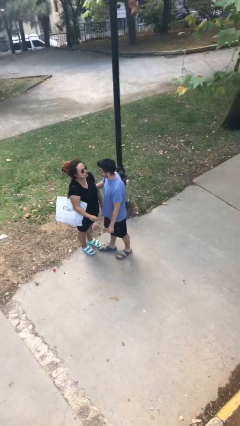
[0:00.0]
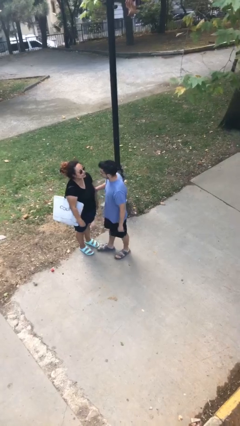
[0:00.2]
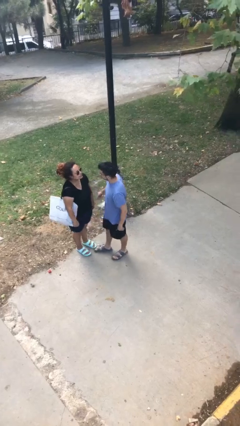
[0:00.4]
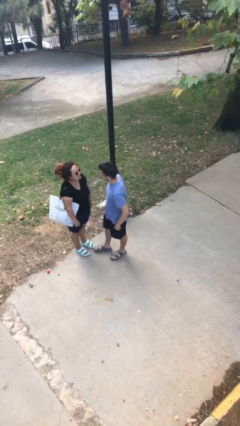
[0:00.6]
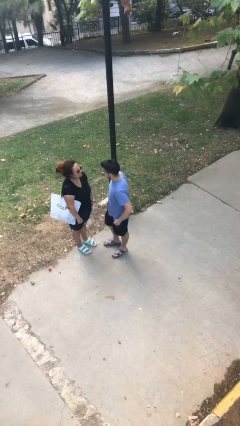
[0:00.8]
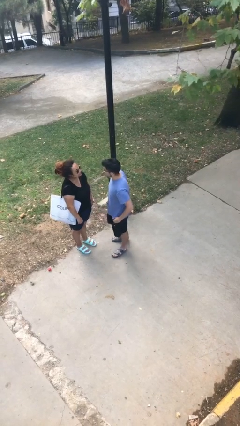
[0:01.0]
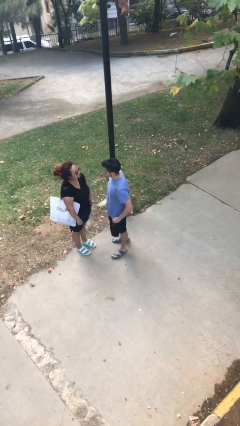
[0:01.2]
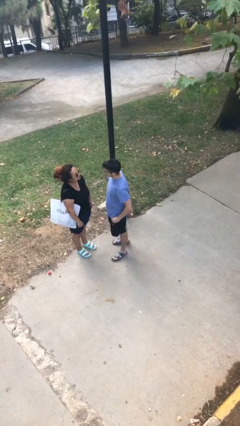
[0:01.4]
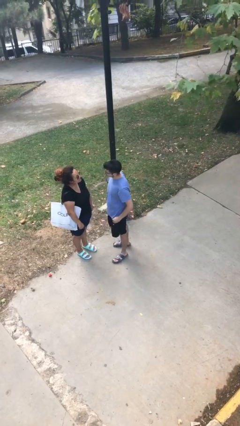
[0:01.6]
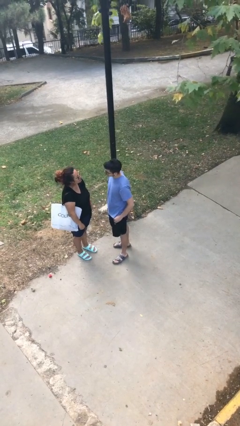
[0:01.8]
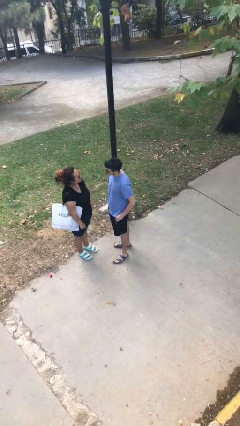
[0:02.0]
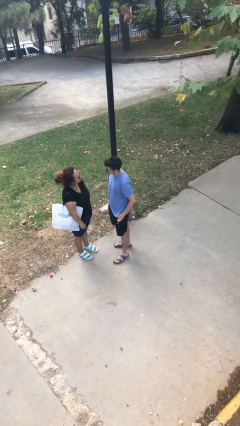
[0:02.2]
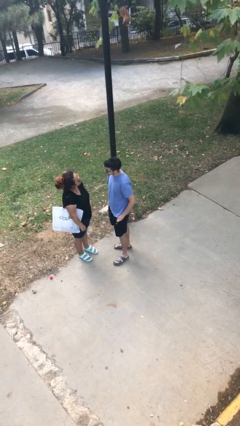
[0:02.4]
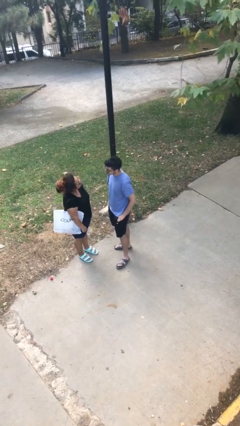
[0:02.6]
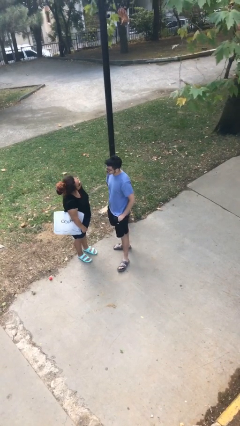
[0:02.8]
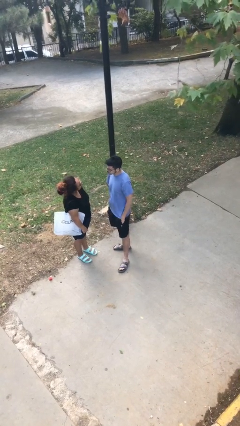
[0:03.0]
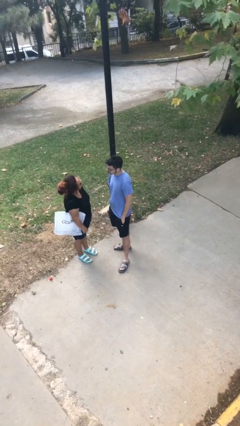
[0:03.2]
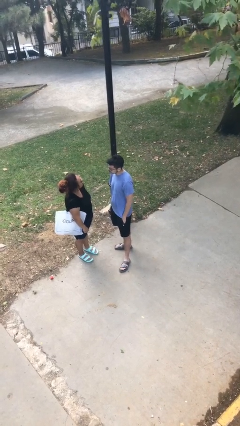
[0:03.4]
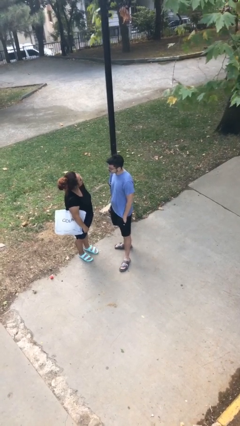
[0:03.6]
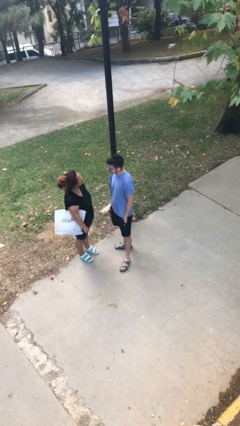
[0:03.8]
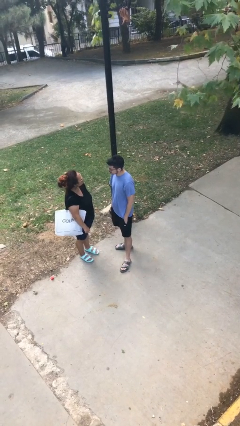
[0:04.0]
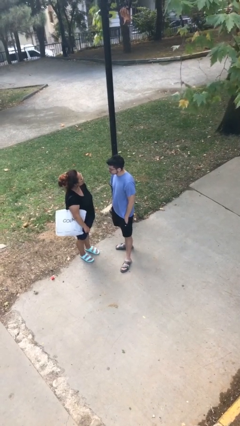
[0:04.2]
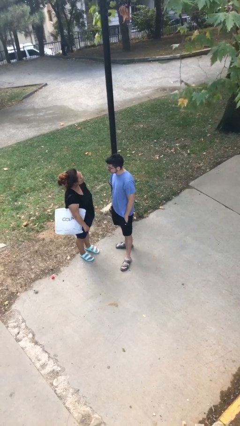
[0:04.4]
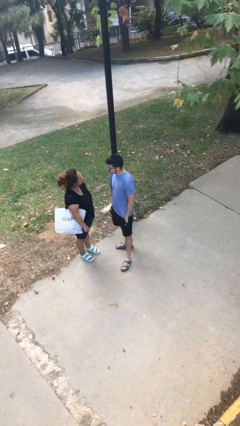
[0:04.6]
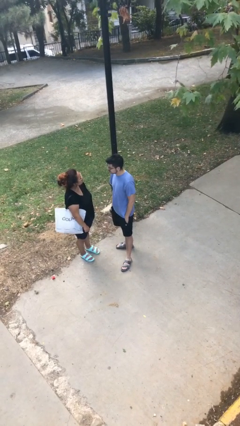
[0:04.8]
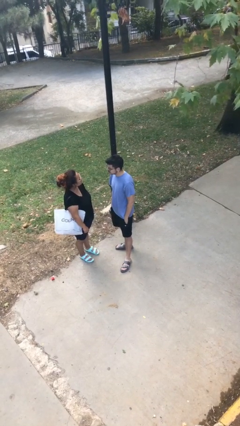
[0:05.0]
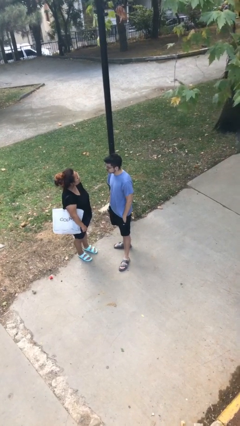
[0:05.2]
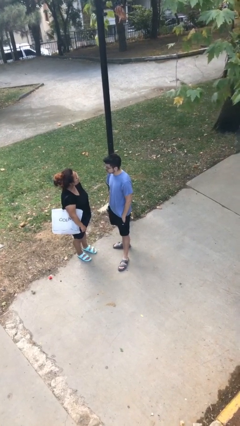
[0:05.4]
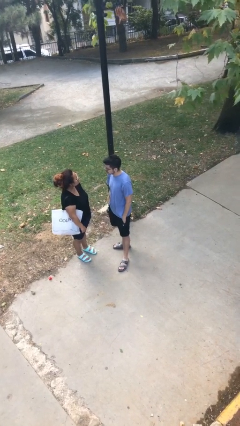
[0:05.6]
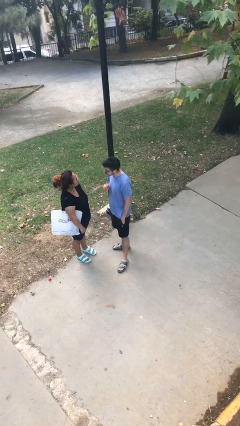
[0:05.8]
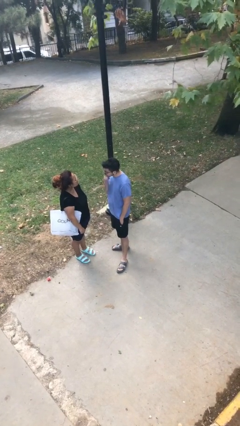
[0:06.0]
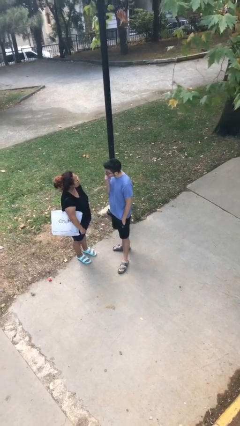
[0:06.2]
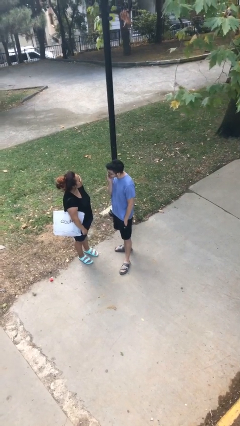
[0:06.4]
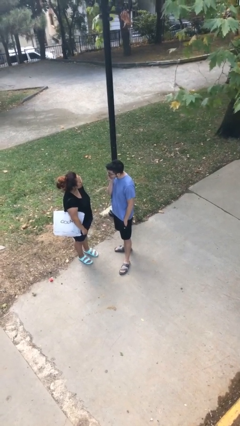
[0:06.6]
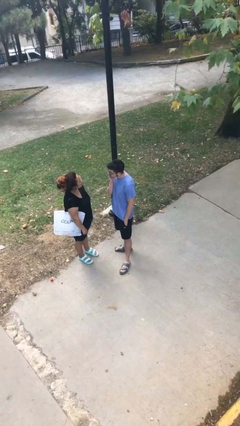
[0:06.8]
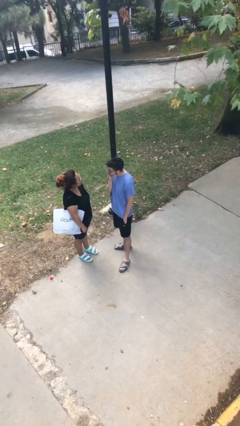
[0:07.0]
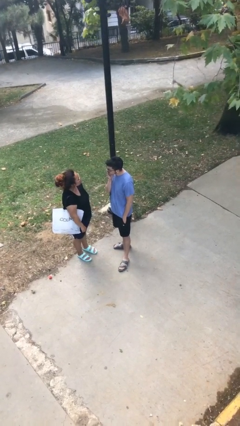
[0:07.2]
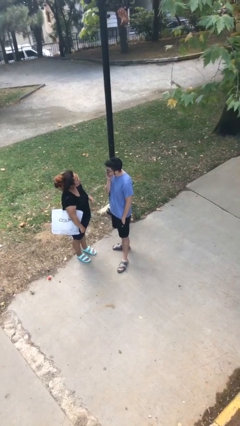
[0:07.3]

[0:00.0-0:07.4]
person talks to person

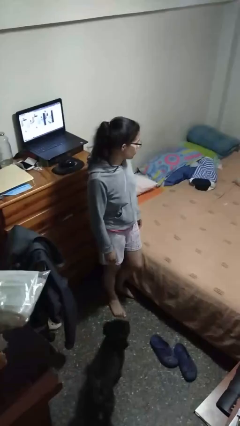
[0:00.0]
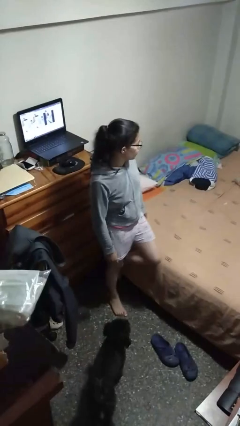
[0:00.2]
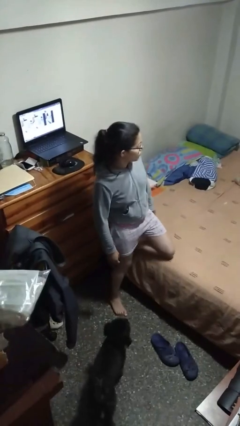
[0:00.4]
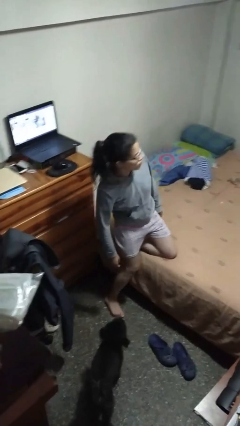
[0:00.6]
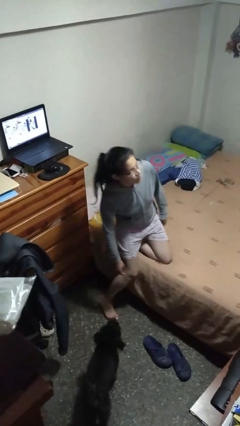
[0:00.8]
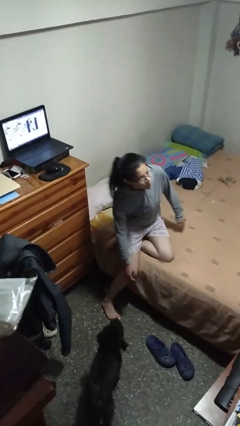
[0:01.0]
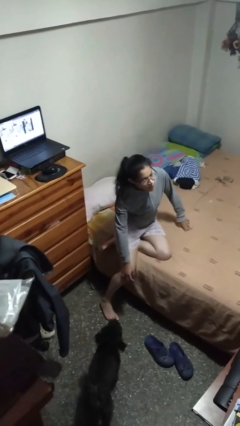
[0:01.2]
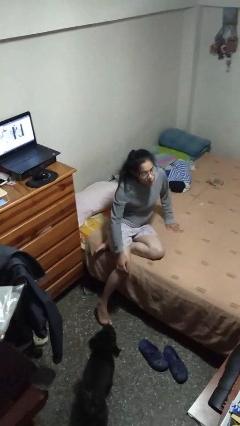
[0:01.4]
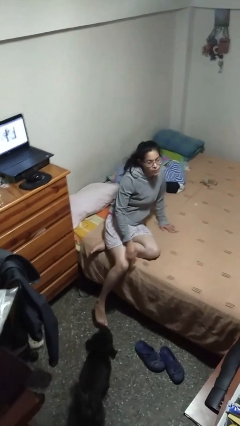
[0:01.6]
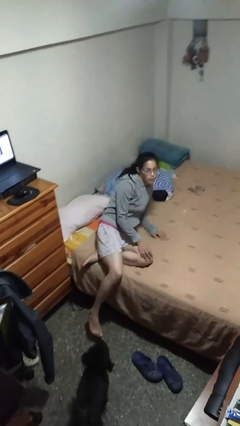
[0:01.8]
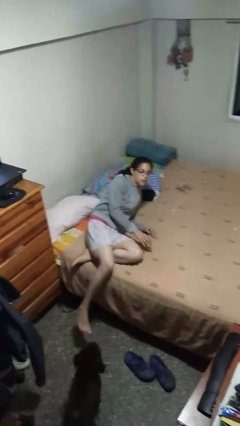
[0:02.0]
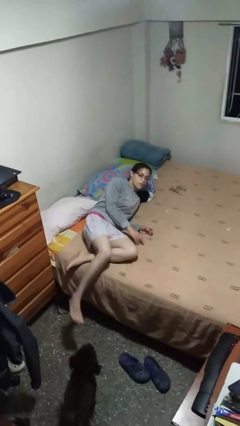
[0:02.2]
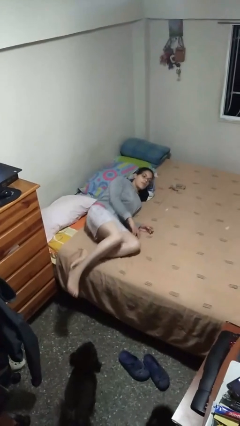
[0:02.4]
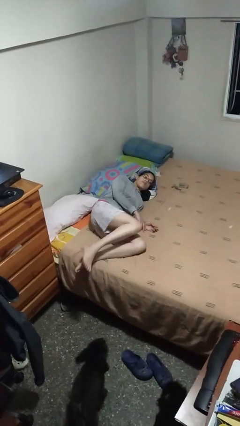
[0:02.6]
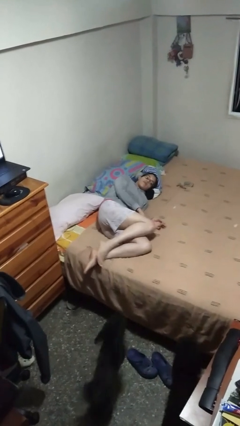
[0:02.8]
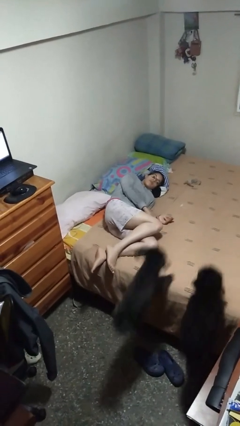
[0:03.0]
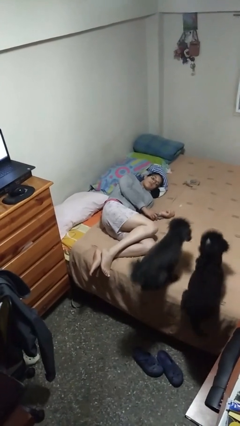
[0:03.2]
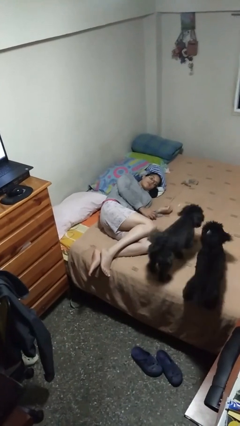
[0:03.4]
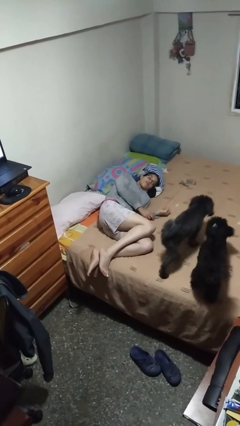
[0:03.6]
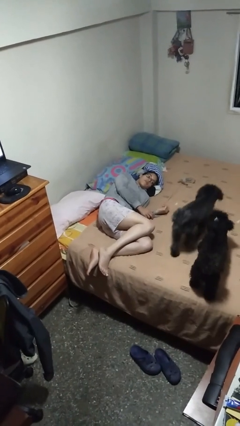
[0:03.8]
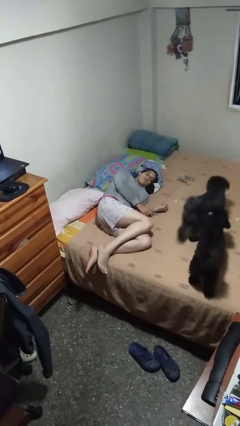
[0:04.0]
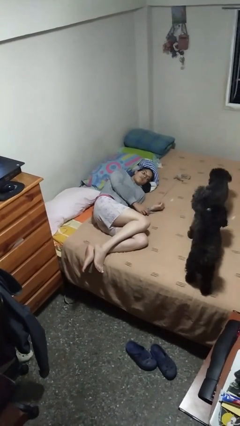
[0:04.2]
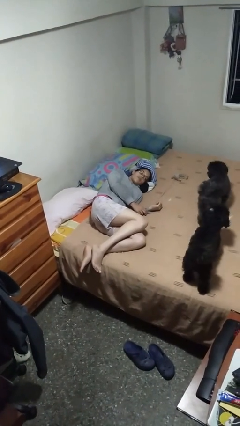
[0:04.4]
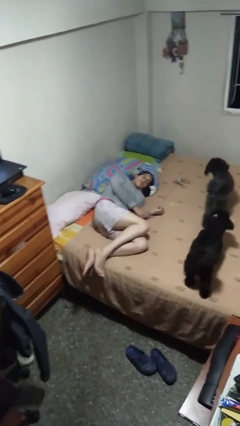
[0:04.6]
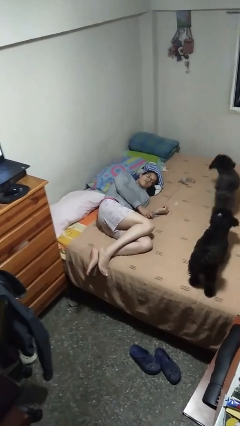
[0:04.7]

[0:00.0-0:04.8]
person lies down on bed

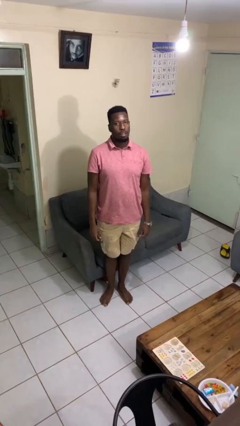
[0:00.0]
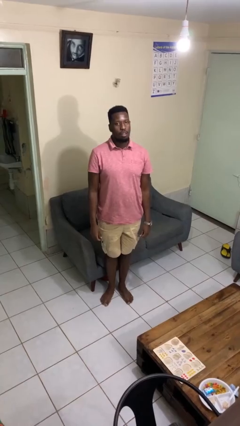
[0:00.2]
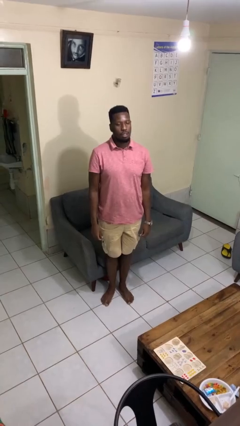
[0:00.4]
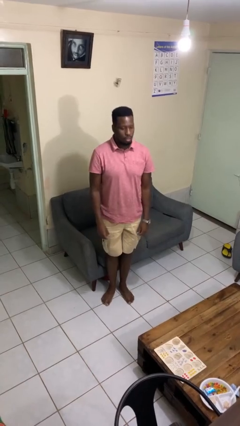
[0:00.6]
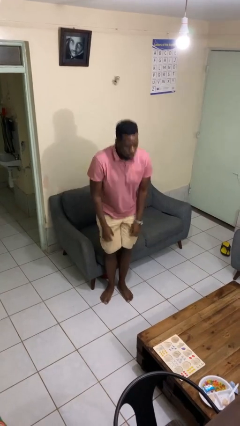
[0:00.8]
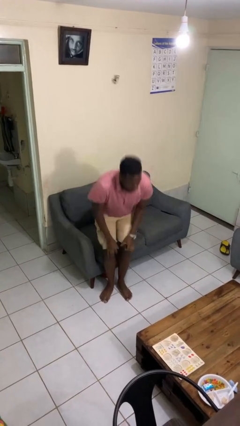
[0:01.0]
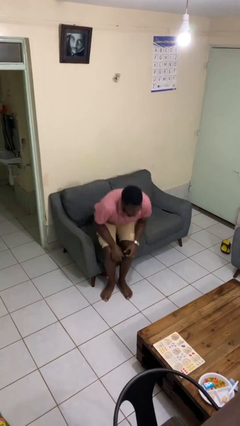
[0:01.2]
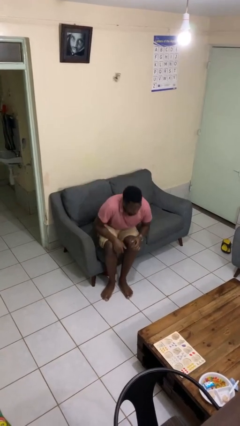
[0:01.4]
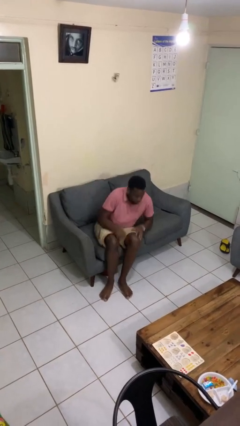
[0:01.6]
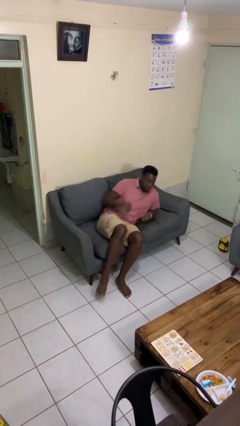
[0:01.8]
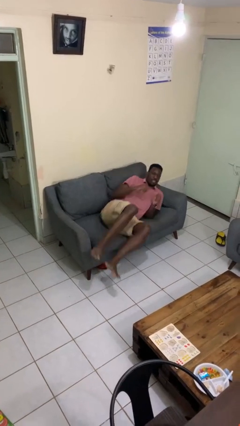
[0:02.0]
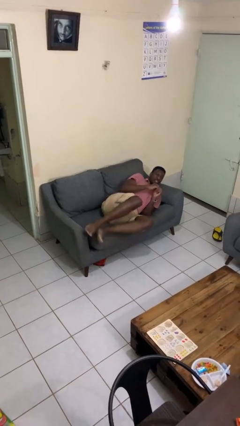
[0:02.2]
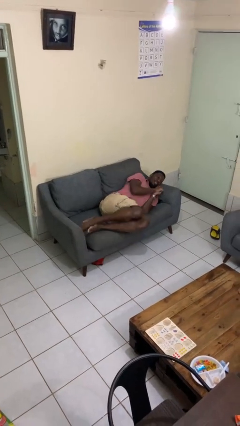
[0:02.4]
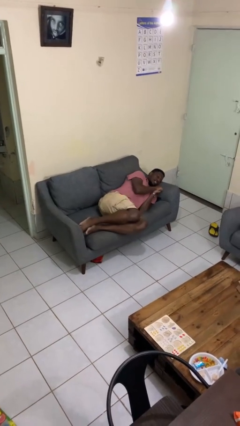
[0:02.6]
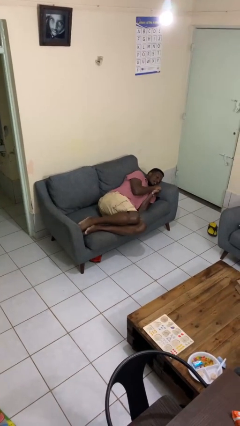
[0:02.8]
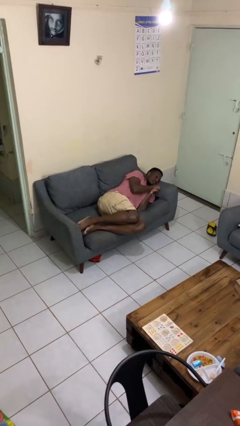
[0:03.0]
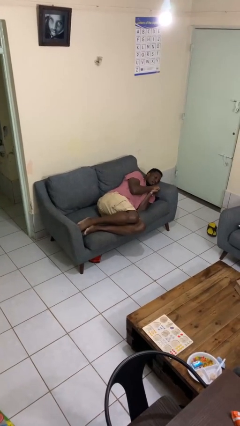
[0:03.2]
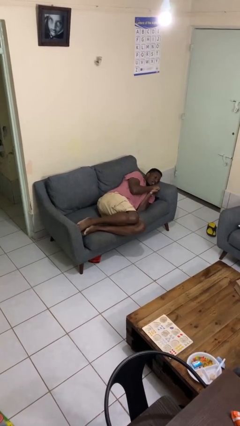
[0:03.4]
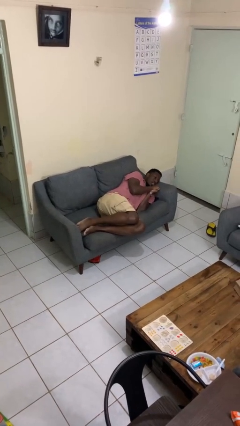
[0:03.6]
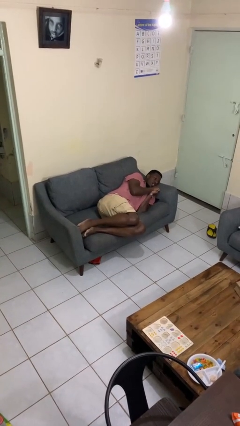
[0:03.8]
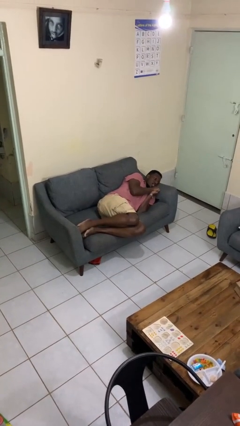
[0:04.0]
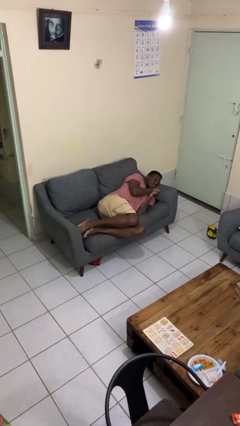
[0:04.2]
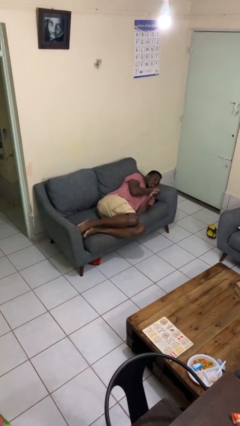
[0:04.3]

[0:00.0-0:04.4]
person lies down on couch

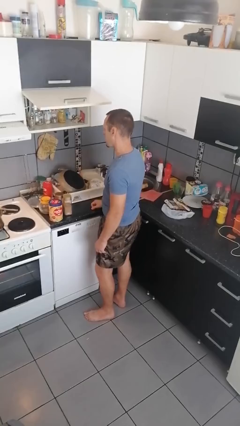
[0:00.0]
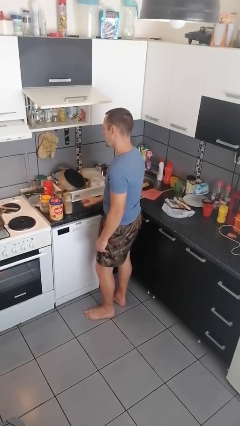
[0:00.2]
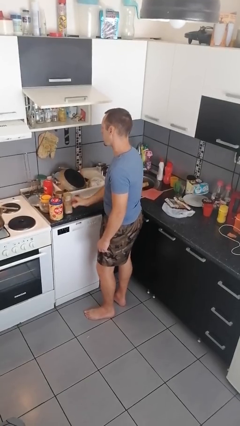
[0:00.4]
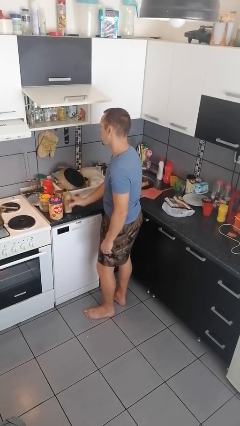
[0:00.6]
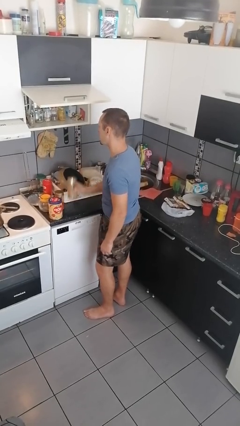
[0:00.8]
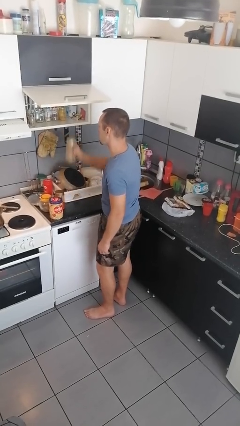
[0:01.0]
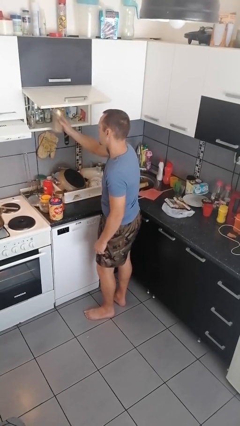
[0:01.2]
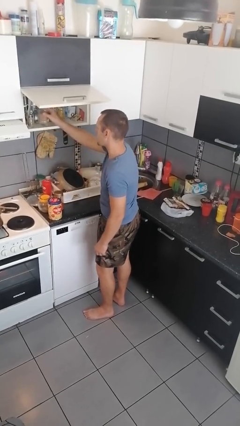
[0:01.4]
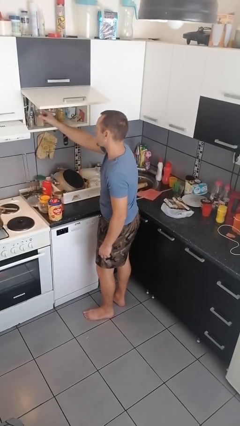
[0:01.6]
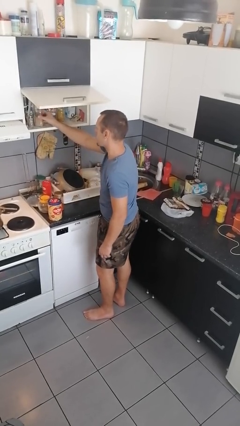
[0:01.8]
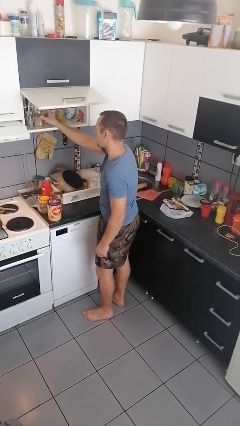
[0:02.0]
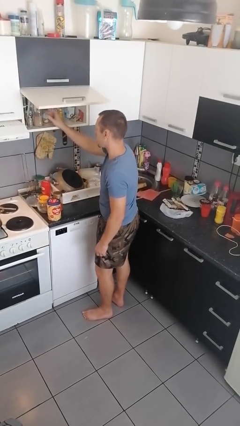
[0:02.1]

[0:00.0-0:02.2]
person loads groceries into cabinet
